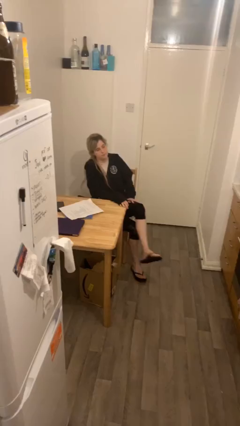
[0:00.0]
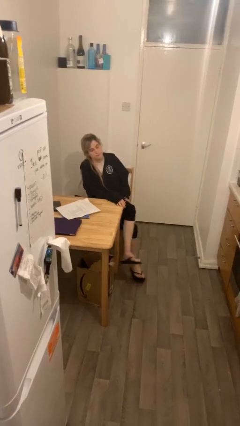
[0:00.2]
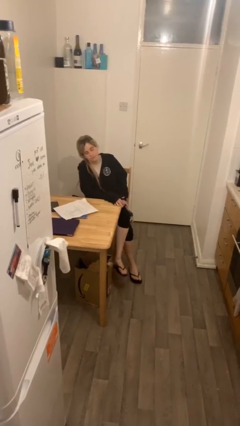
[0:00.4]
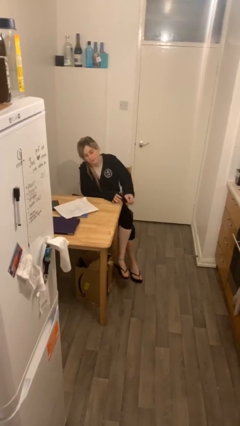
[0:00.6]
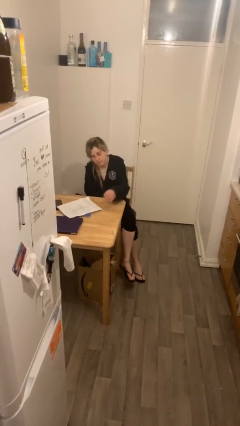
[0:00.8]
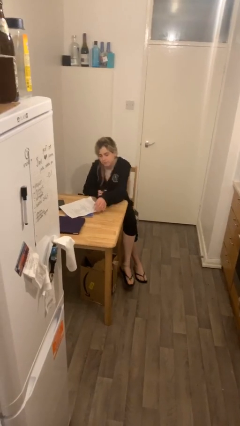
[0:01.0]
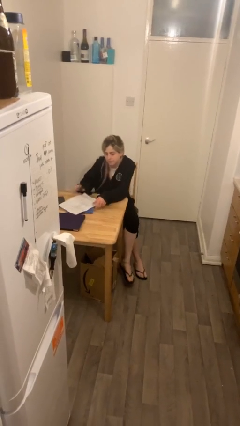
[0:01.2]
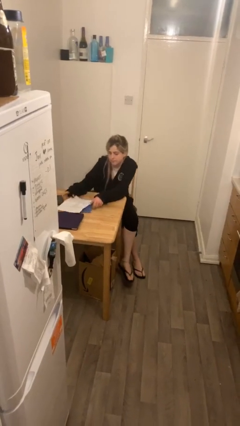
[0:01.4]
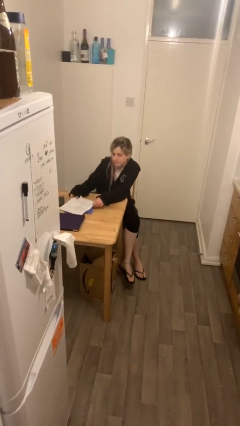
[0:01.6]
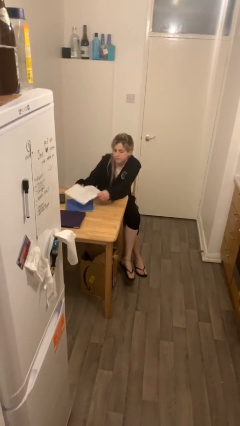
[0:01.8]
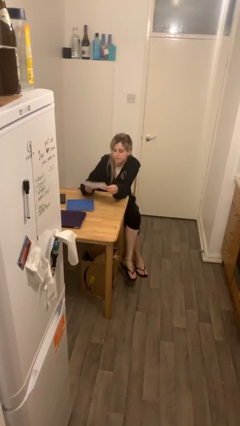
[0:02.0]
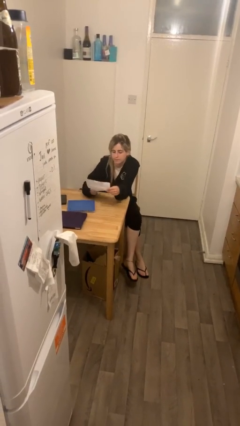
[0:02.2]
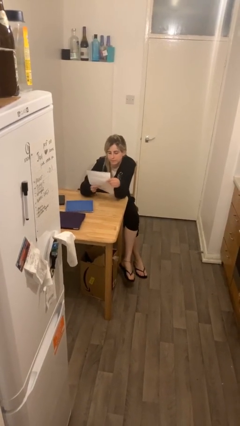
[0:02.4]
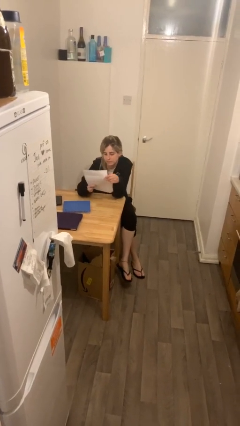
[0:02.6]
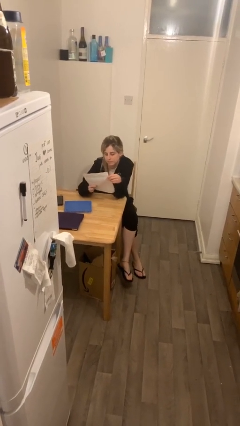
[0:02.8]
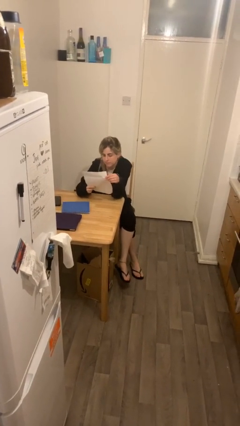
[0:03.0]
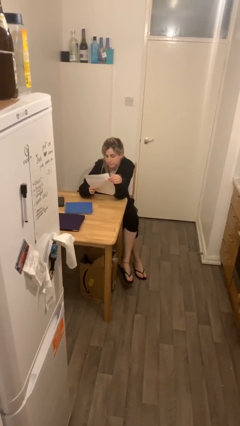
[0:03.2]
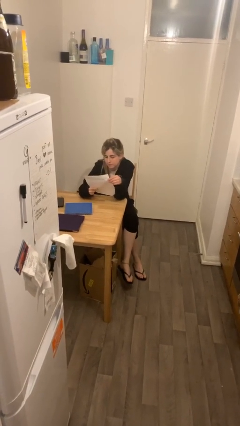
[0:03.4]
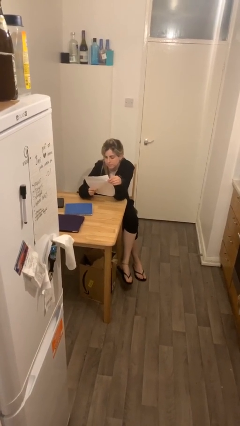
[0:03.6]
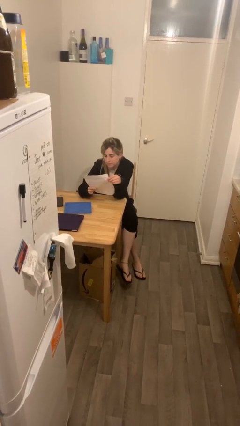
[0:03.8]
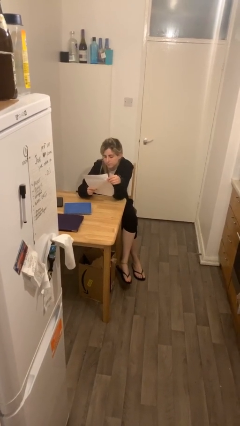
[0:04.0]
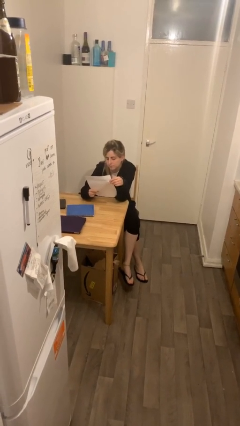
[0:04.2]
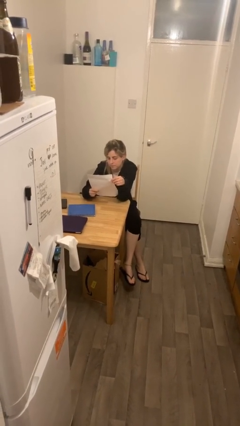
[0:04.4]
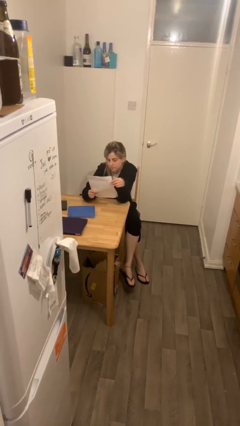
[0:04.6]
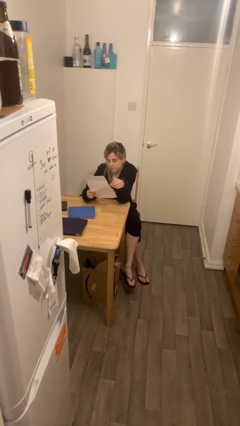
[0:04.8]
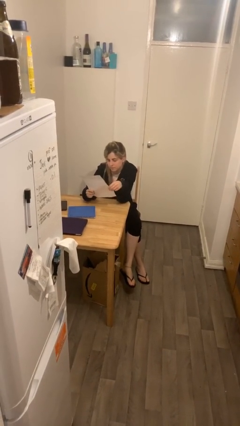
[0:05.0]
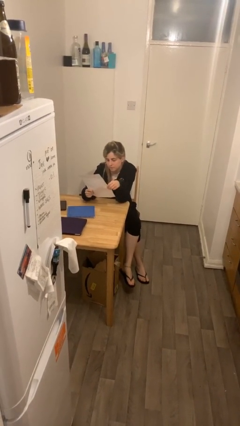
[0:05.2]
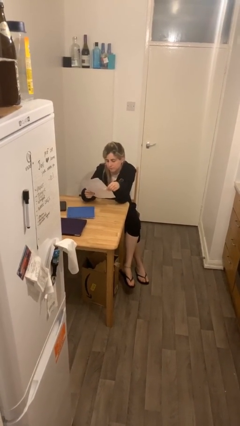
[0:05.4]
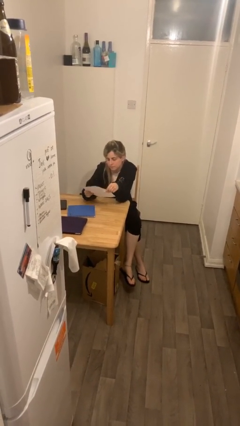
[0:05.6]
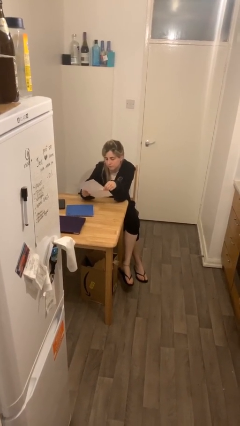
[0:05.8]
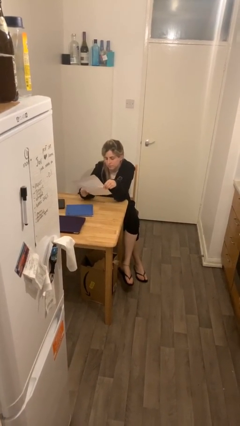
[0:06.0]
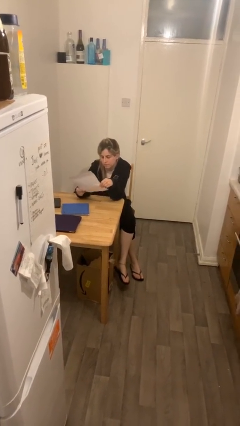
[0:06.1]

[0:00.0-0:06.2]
person reads document

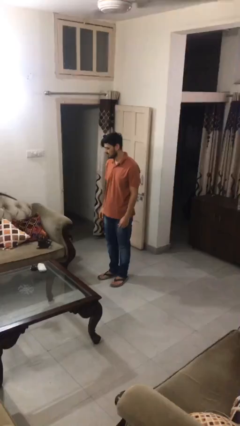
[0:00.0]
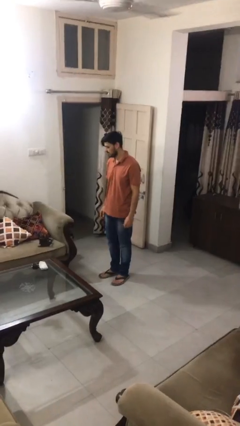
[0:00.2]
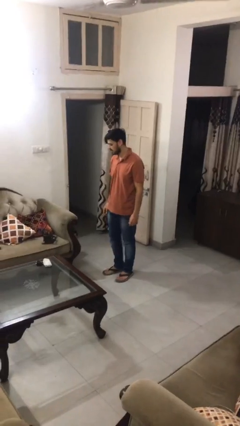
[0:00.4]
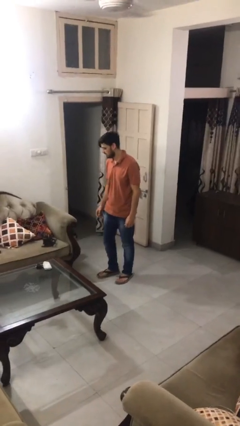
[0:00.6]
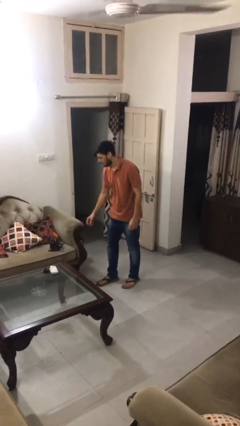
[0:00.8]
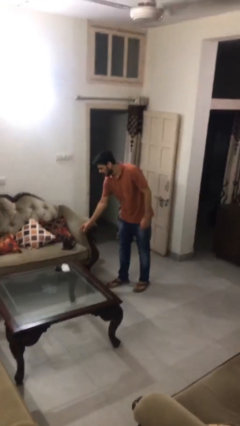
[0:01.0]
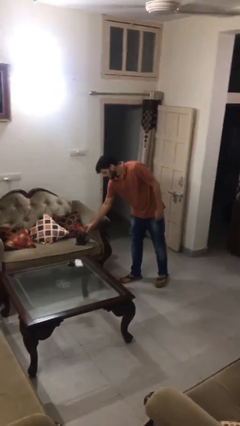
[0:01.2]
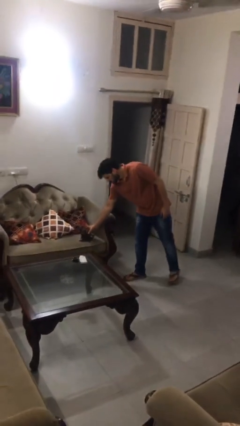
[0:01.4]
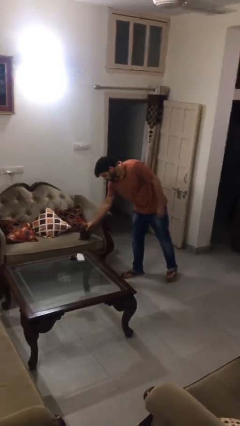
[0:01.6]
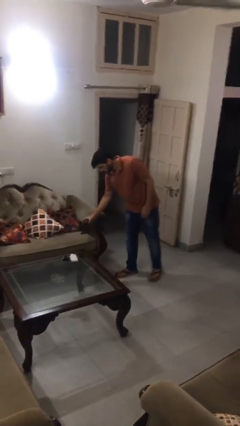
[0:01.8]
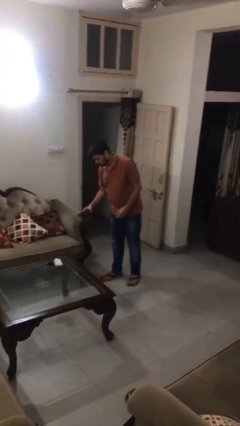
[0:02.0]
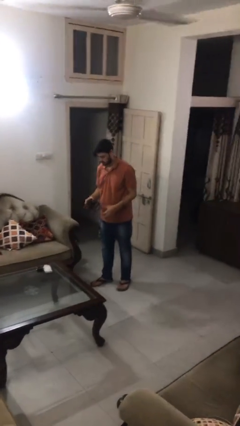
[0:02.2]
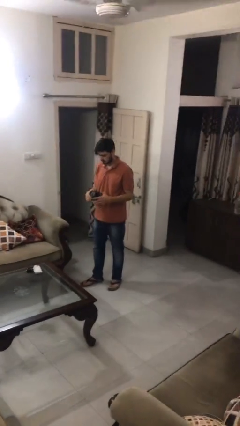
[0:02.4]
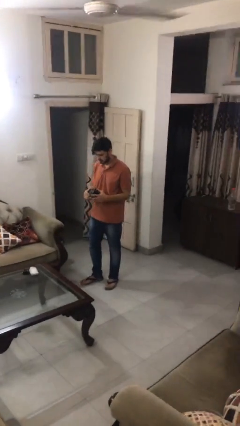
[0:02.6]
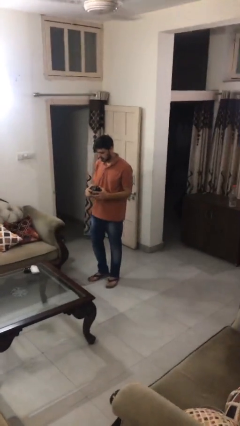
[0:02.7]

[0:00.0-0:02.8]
person picks up object from couch

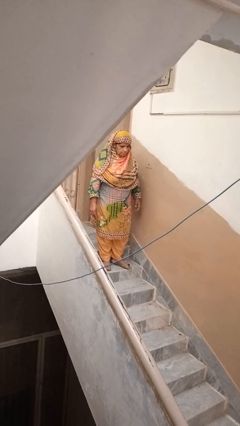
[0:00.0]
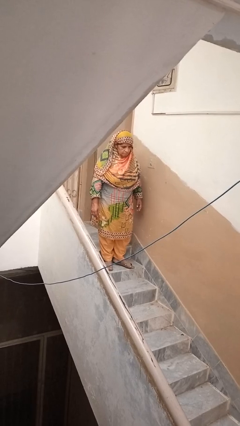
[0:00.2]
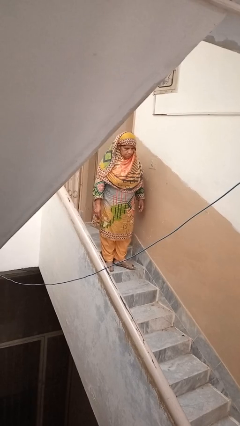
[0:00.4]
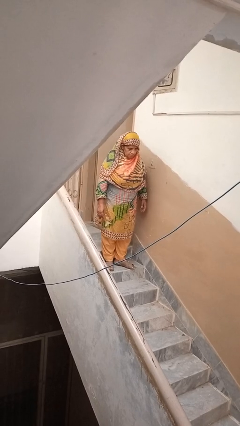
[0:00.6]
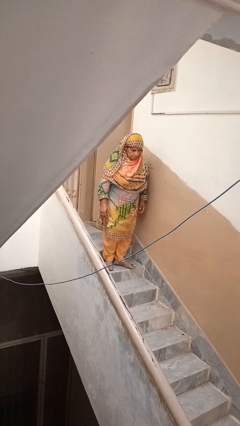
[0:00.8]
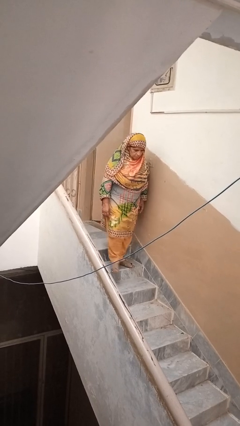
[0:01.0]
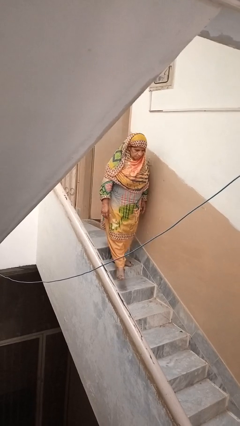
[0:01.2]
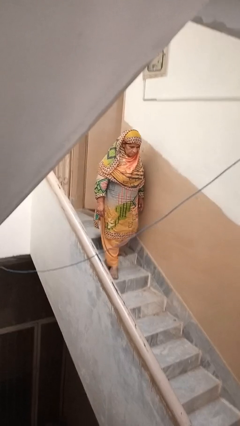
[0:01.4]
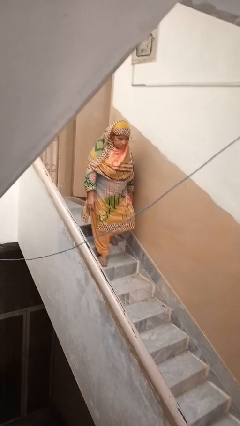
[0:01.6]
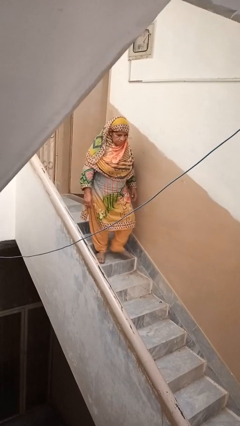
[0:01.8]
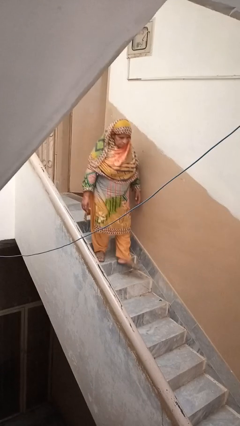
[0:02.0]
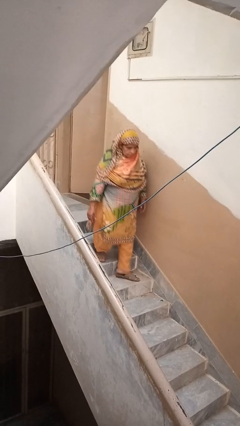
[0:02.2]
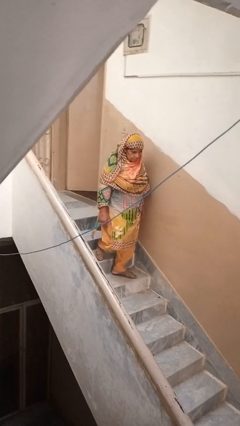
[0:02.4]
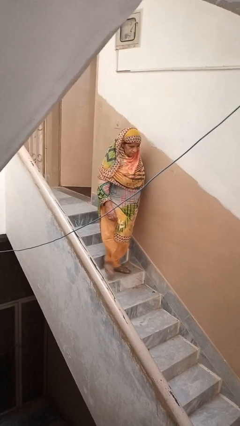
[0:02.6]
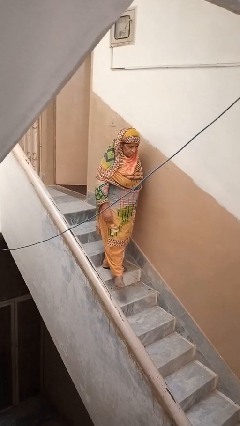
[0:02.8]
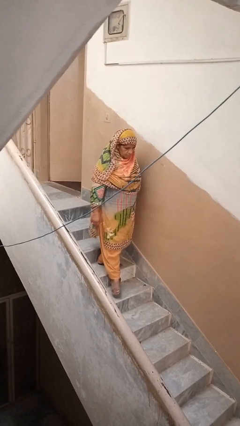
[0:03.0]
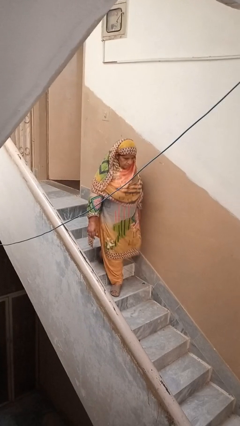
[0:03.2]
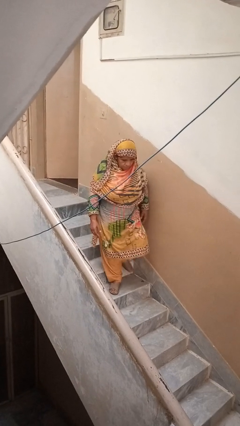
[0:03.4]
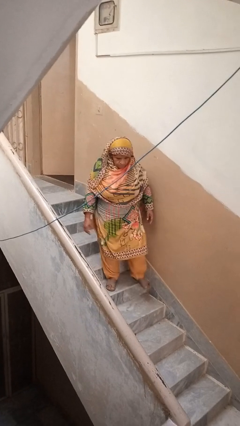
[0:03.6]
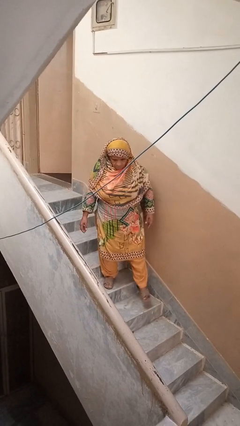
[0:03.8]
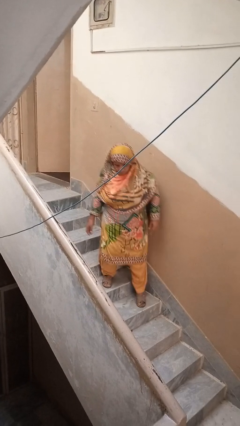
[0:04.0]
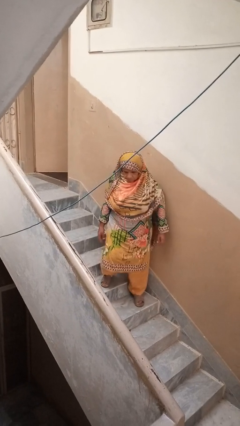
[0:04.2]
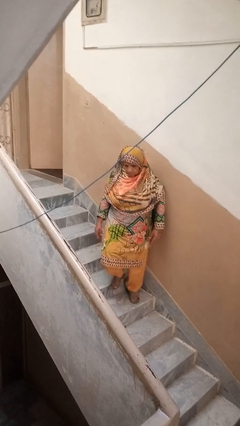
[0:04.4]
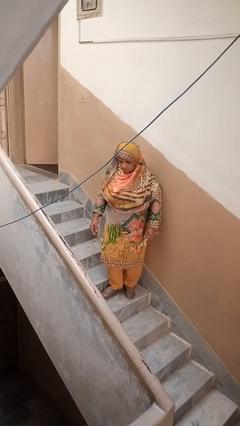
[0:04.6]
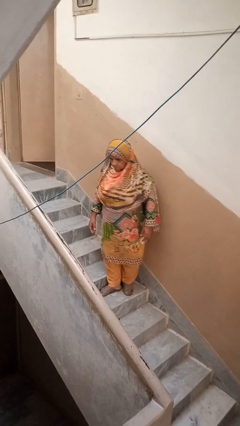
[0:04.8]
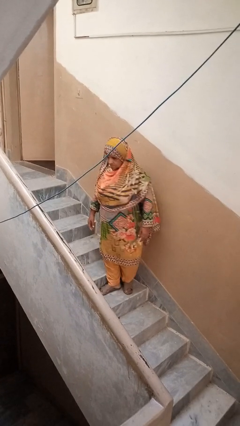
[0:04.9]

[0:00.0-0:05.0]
person climbs down stairs

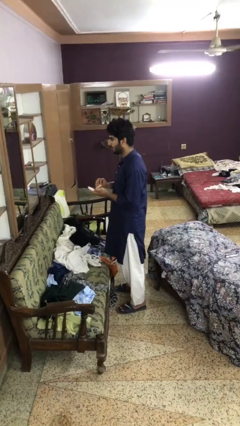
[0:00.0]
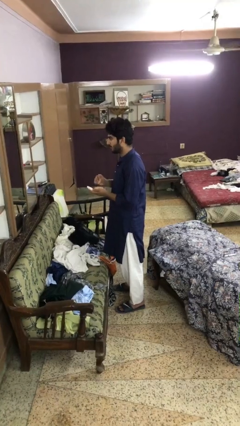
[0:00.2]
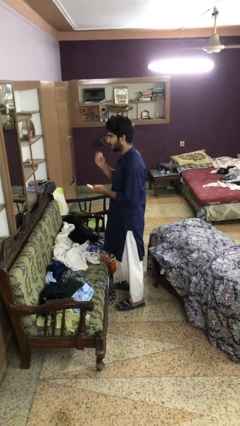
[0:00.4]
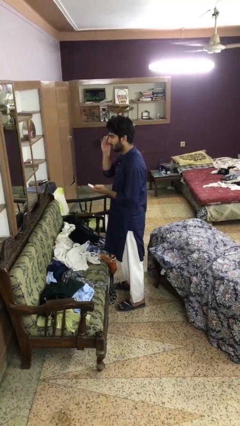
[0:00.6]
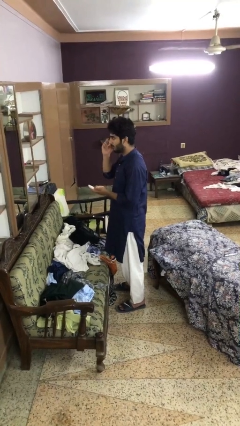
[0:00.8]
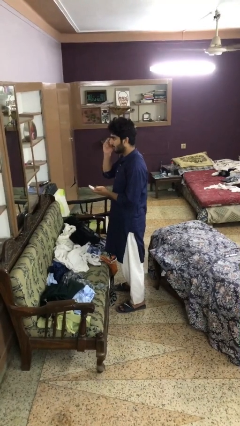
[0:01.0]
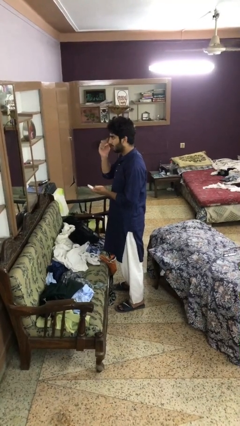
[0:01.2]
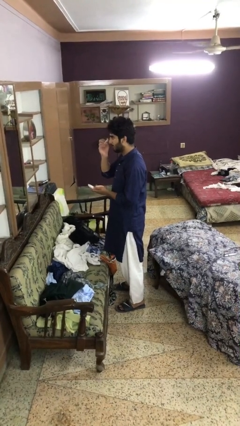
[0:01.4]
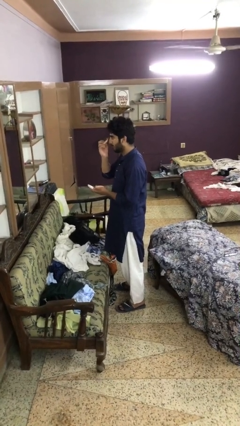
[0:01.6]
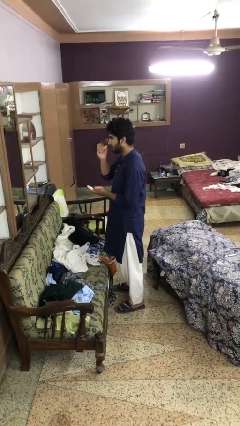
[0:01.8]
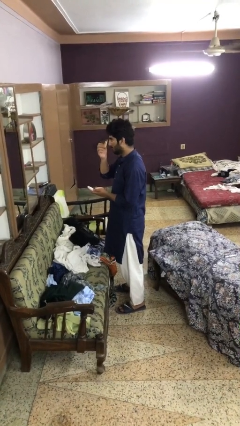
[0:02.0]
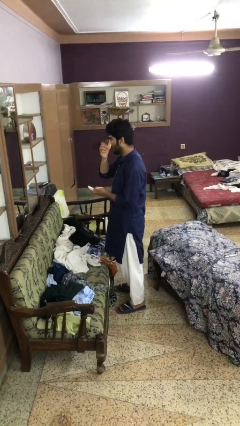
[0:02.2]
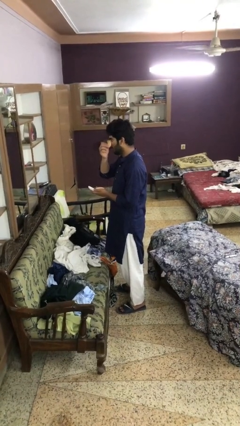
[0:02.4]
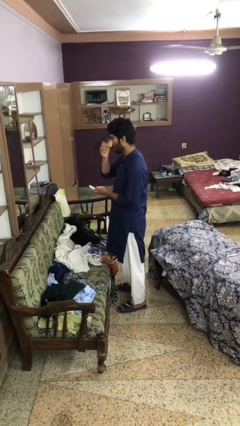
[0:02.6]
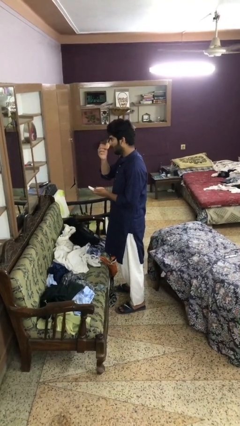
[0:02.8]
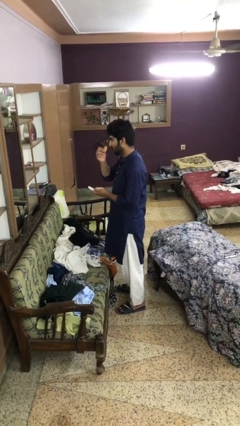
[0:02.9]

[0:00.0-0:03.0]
person applies foundation makeup

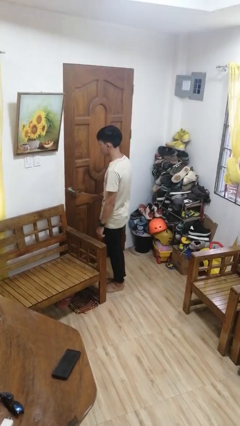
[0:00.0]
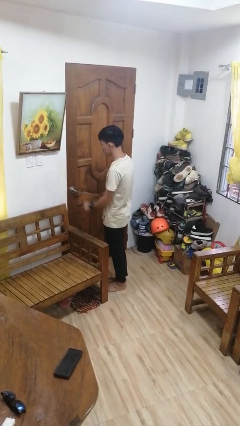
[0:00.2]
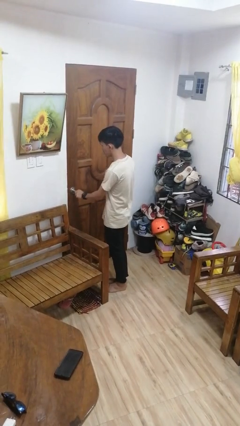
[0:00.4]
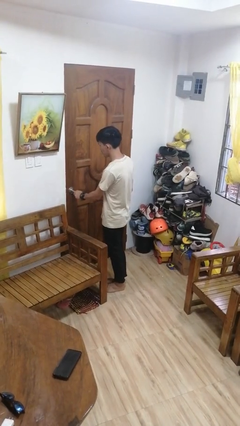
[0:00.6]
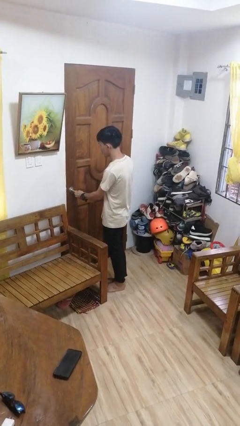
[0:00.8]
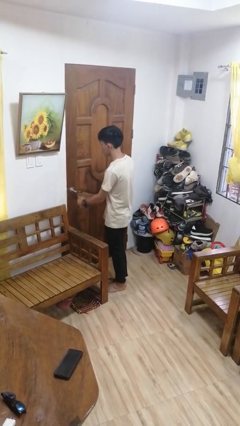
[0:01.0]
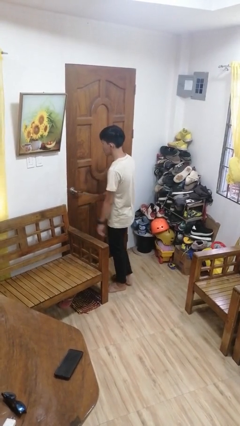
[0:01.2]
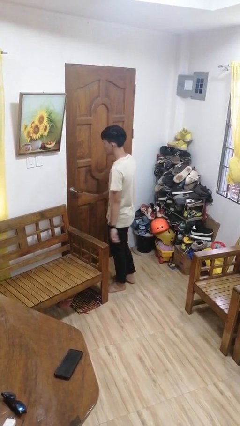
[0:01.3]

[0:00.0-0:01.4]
person locks door with keys
